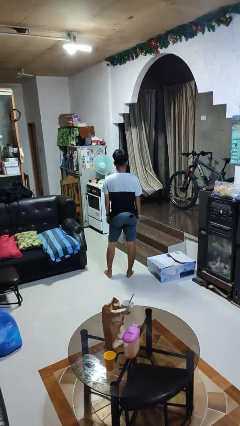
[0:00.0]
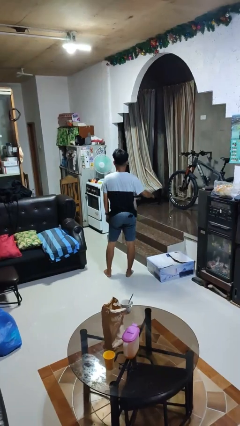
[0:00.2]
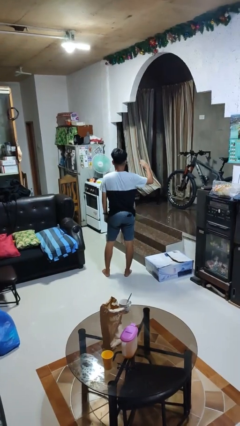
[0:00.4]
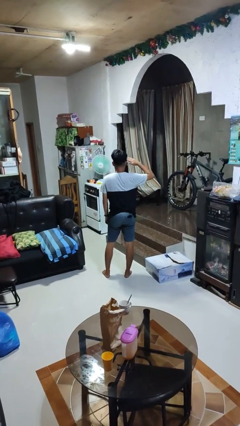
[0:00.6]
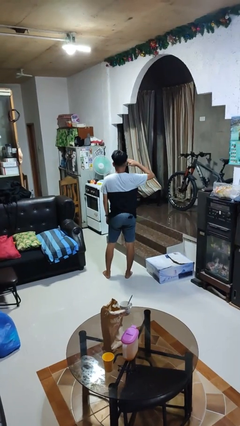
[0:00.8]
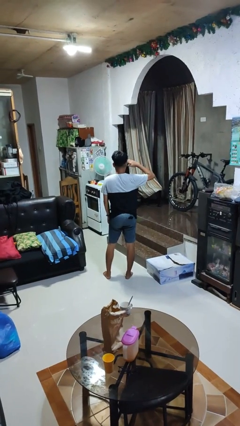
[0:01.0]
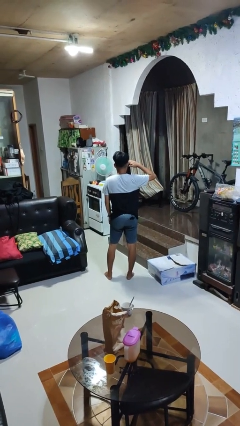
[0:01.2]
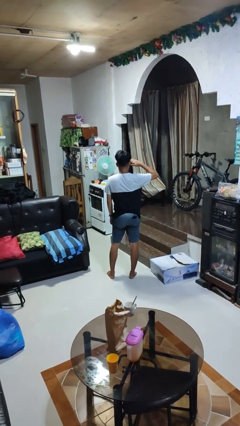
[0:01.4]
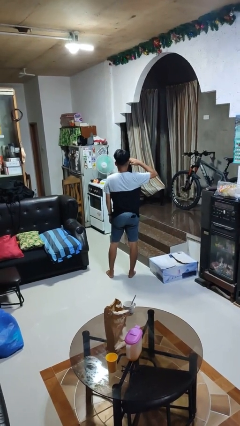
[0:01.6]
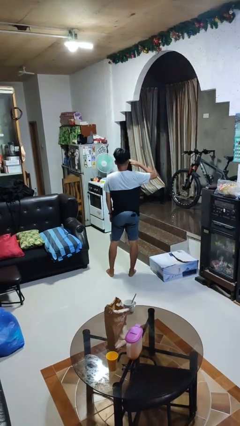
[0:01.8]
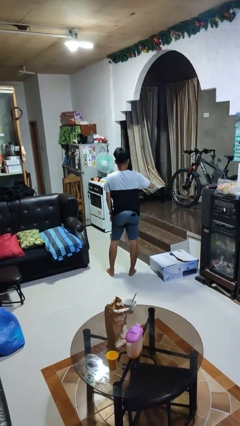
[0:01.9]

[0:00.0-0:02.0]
person salutes

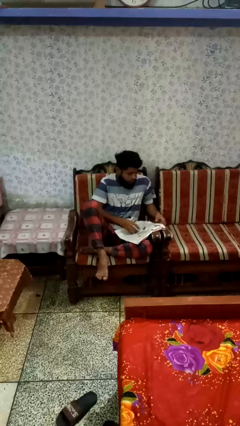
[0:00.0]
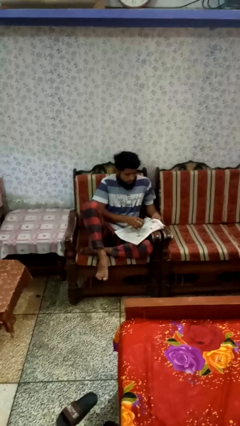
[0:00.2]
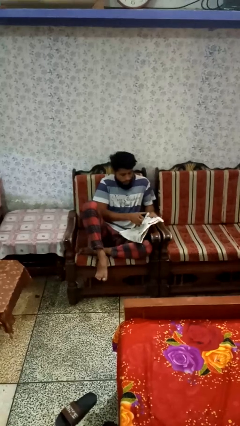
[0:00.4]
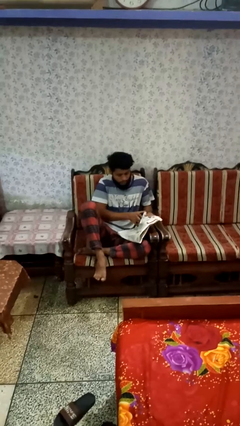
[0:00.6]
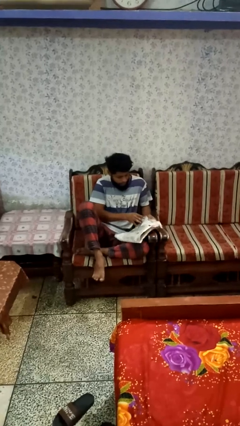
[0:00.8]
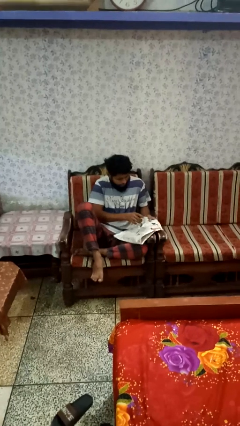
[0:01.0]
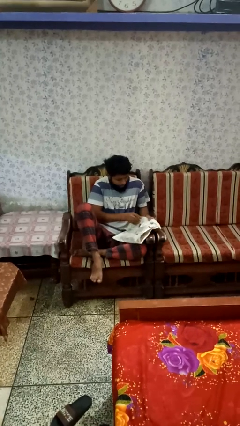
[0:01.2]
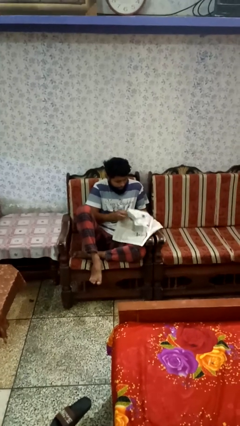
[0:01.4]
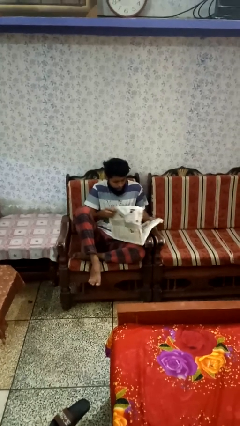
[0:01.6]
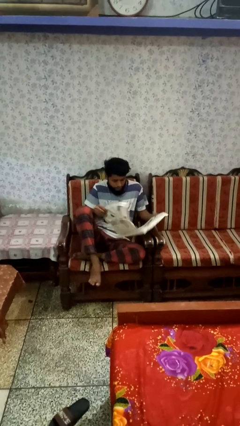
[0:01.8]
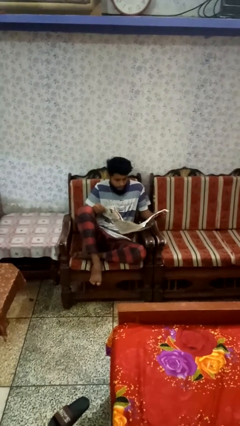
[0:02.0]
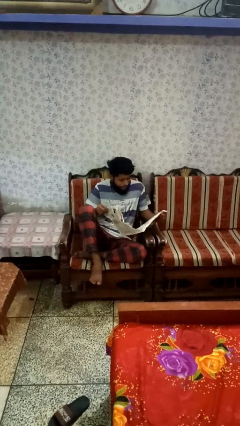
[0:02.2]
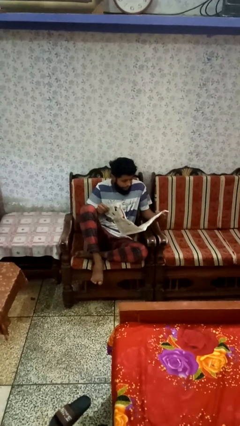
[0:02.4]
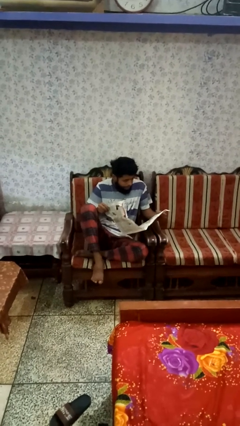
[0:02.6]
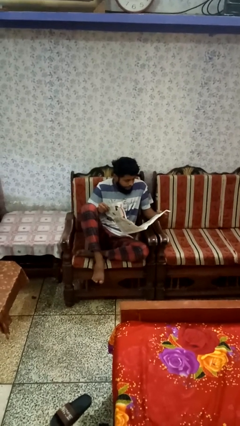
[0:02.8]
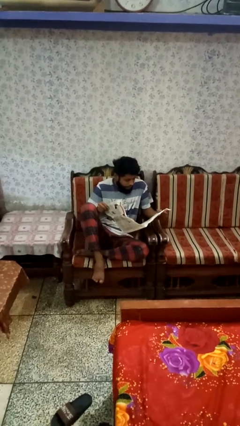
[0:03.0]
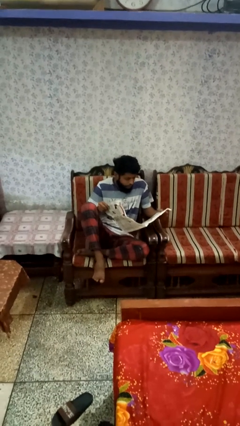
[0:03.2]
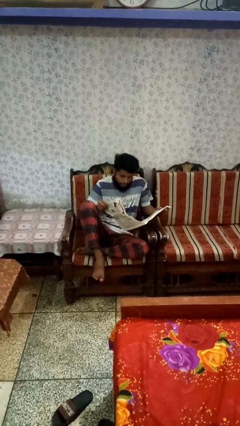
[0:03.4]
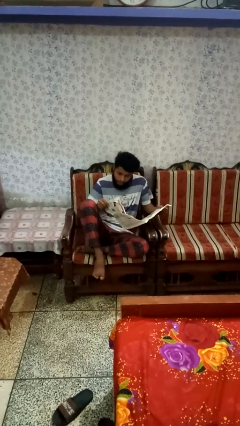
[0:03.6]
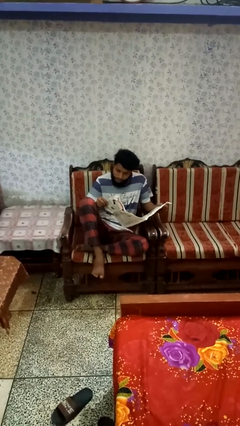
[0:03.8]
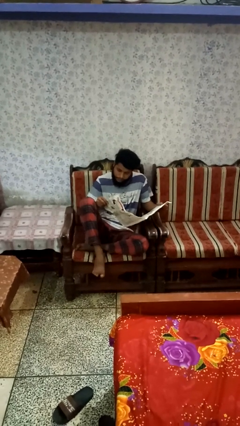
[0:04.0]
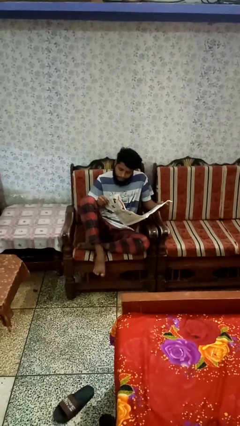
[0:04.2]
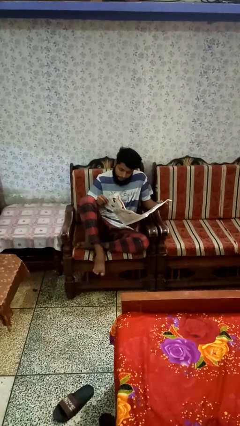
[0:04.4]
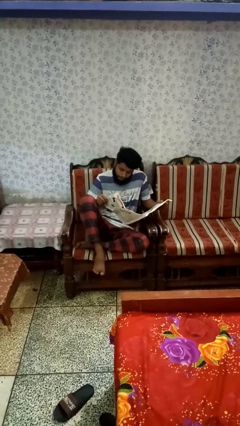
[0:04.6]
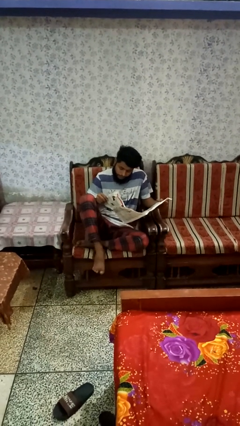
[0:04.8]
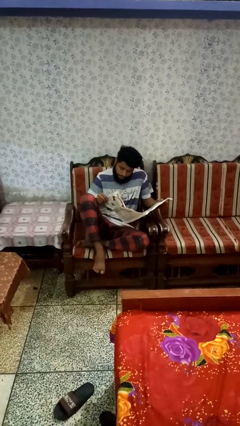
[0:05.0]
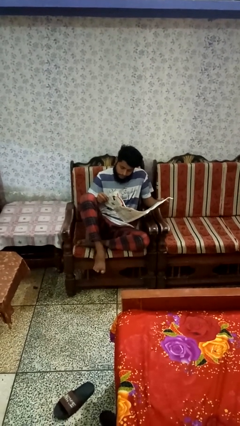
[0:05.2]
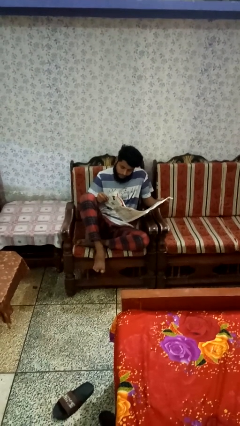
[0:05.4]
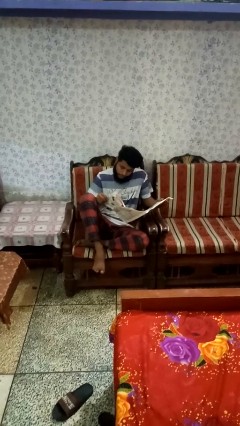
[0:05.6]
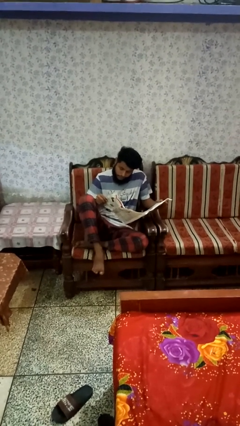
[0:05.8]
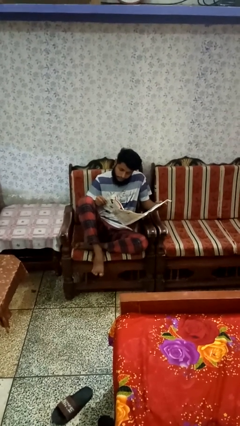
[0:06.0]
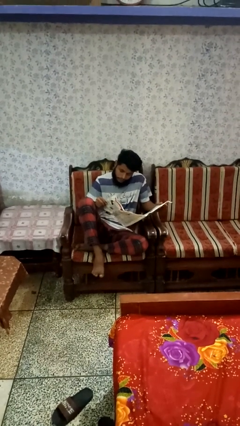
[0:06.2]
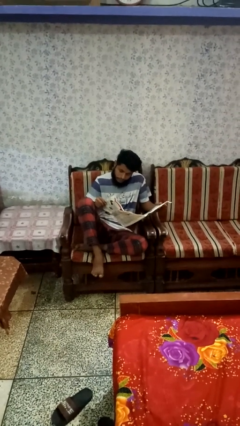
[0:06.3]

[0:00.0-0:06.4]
person reads newspaper

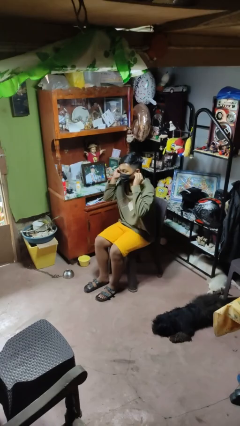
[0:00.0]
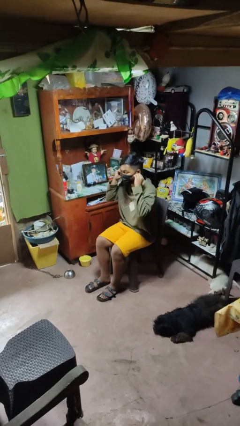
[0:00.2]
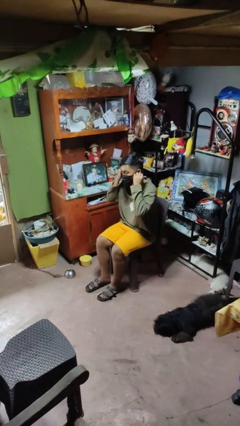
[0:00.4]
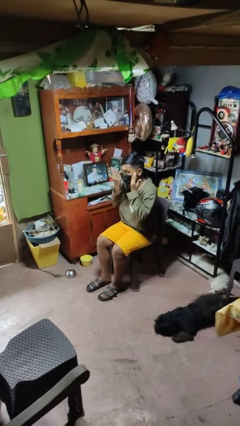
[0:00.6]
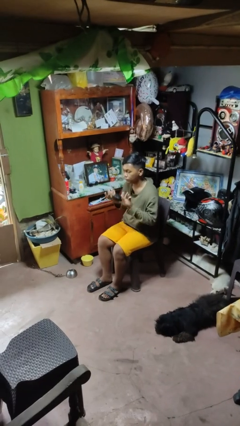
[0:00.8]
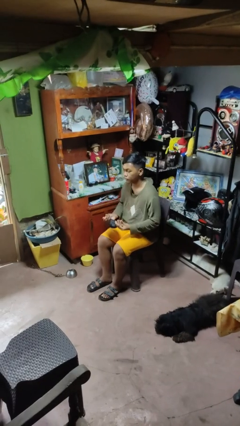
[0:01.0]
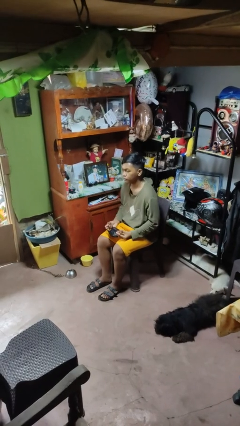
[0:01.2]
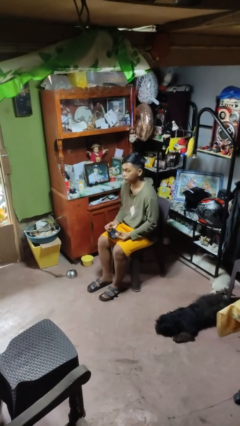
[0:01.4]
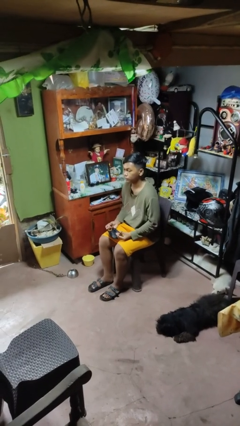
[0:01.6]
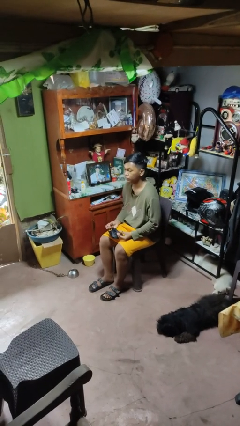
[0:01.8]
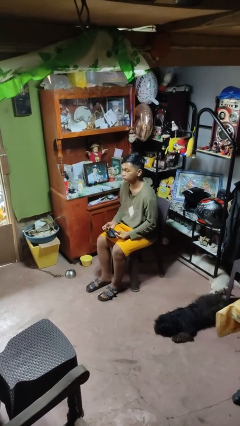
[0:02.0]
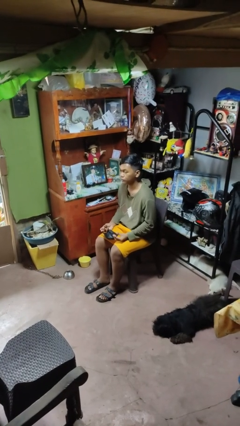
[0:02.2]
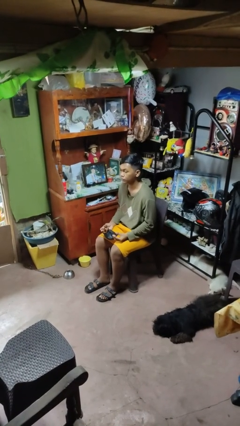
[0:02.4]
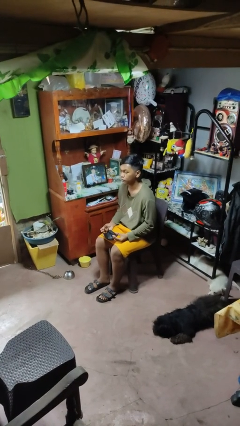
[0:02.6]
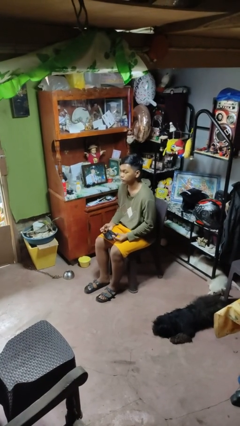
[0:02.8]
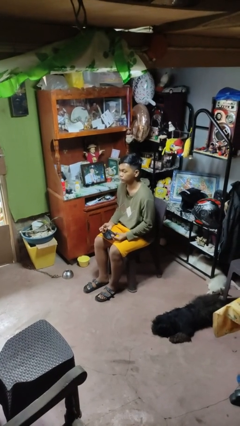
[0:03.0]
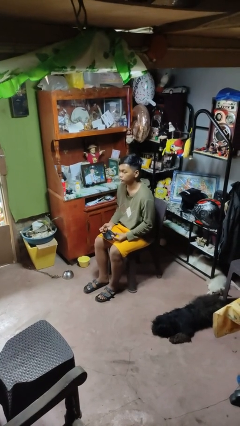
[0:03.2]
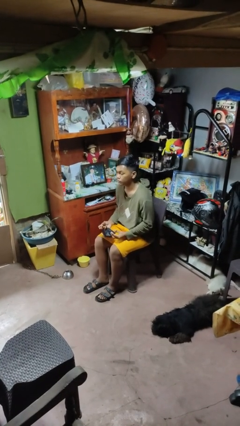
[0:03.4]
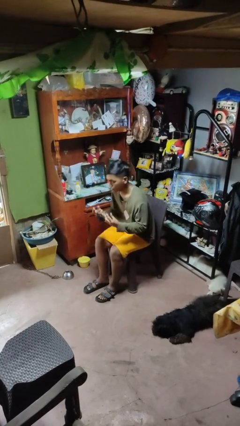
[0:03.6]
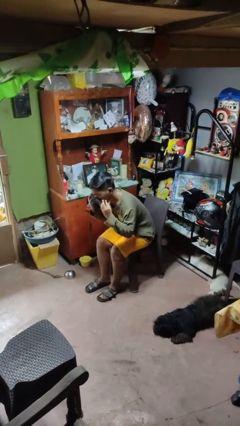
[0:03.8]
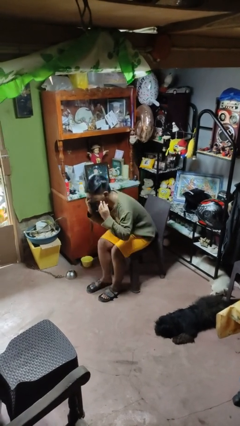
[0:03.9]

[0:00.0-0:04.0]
person takes off facemask

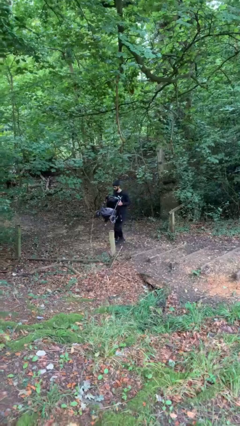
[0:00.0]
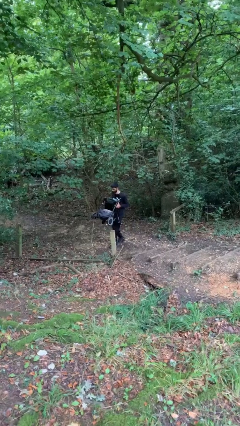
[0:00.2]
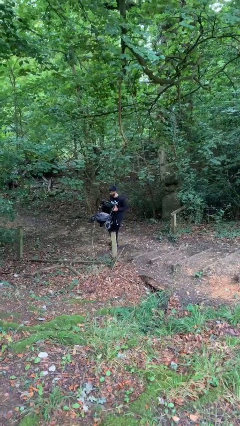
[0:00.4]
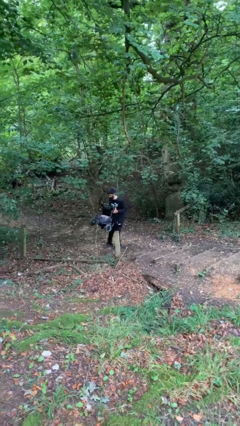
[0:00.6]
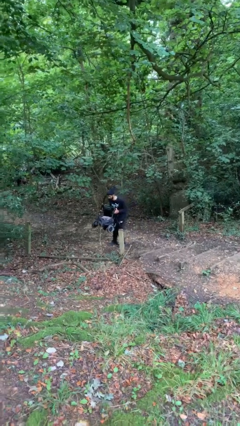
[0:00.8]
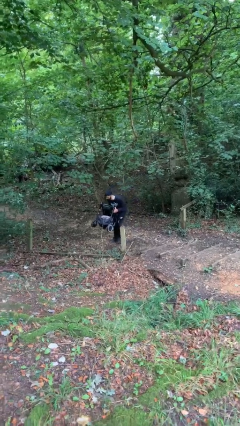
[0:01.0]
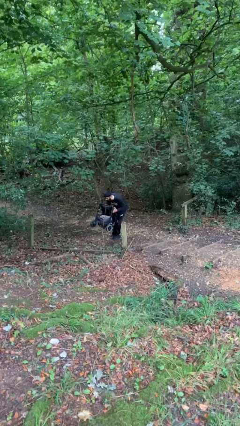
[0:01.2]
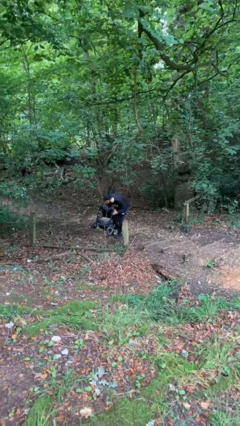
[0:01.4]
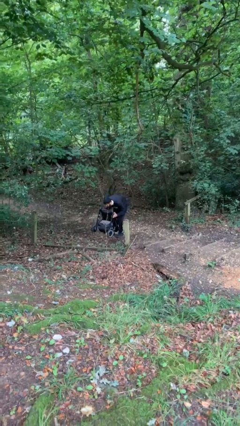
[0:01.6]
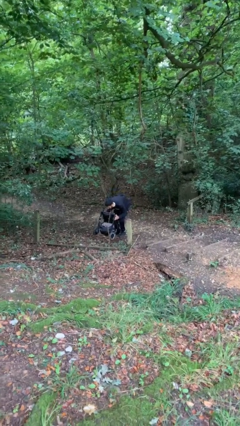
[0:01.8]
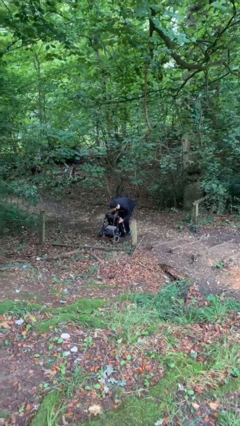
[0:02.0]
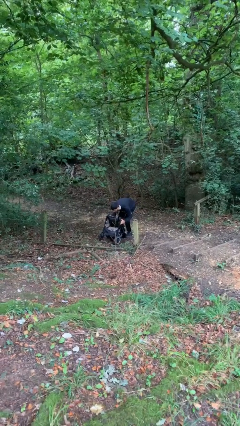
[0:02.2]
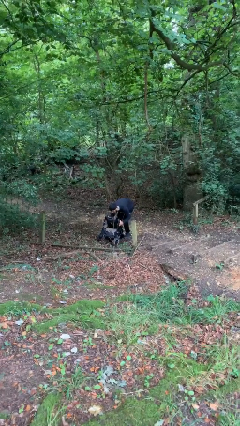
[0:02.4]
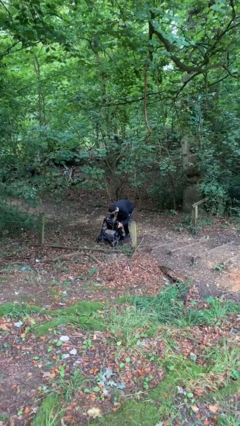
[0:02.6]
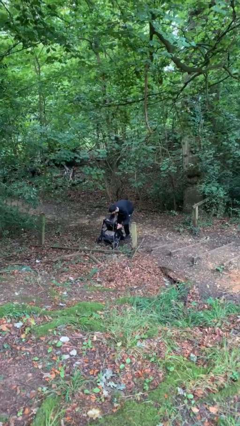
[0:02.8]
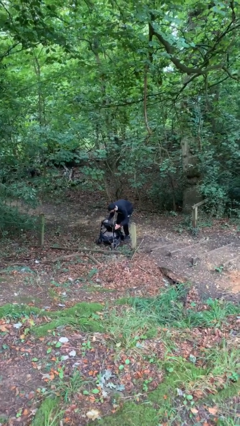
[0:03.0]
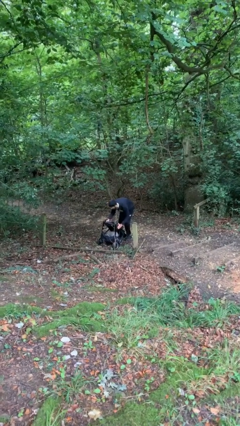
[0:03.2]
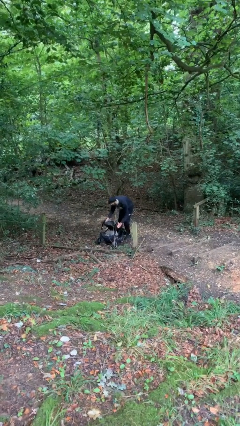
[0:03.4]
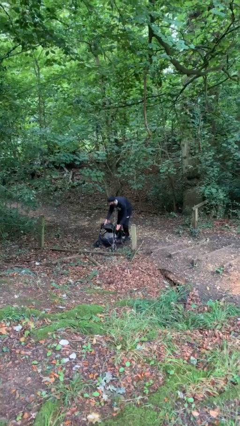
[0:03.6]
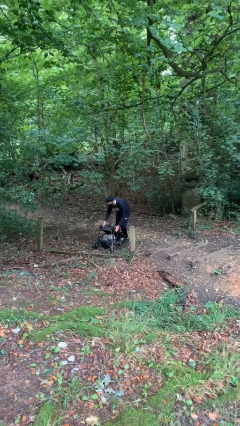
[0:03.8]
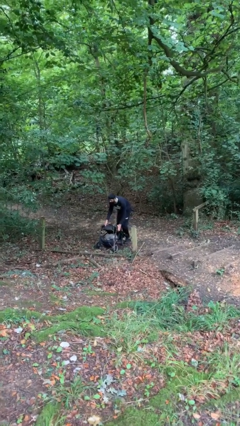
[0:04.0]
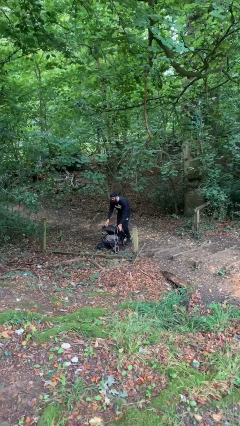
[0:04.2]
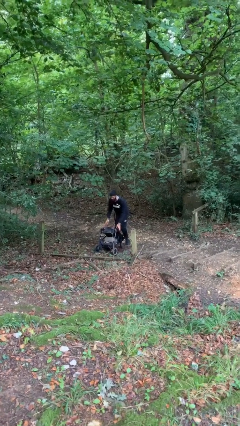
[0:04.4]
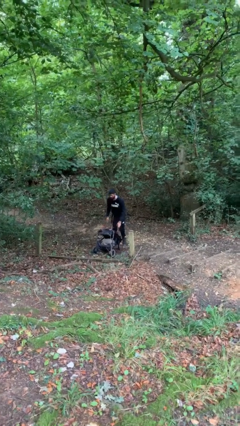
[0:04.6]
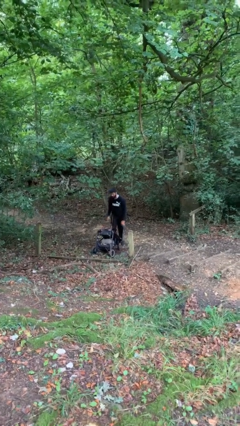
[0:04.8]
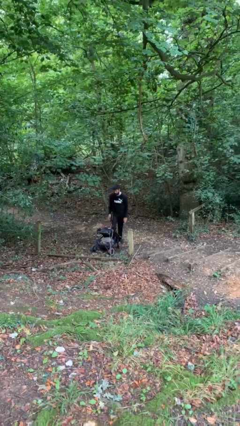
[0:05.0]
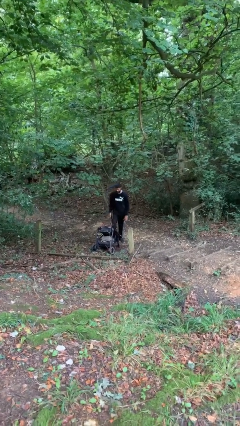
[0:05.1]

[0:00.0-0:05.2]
person puts down object on floor
